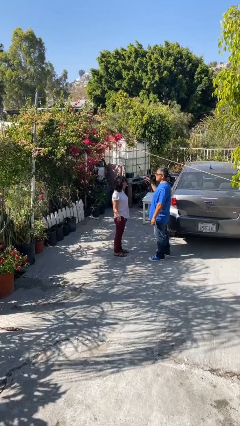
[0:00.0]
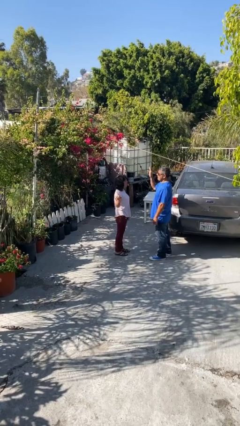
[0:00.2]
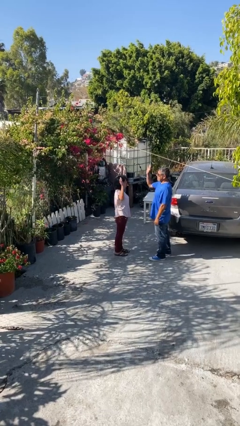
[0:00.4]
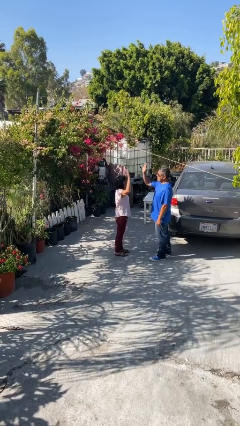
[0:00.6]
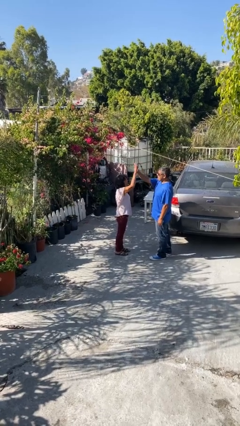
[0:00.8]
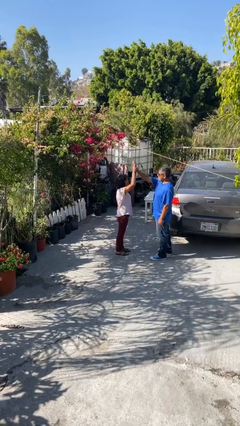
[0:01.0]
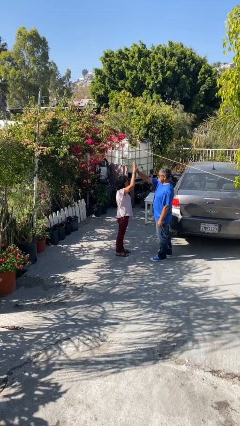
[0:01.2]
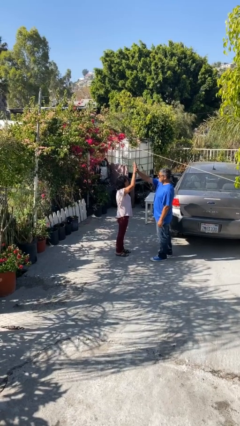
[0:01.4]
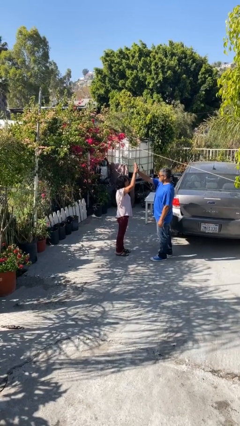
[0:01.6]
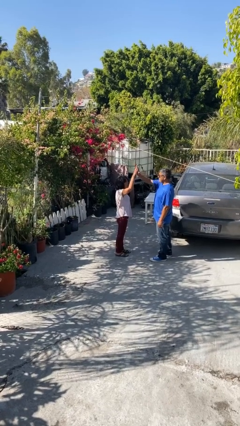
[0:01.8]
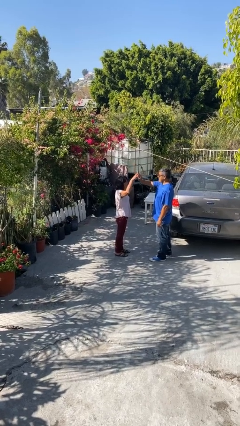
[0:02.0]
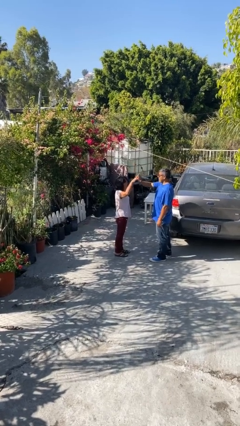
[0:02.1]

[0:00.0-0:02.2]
person highfives hand

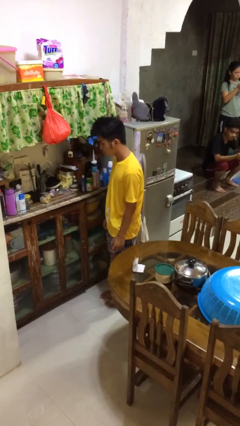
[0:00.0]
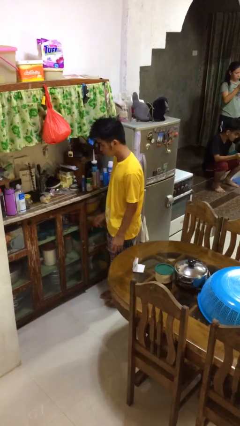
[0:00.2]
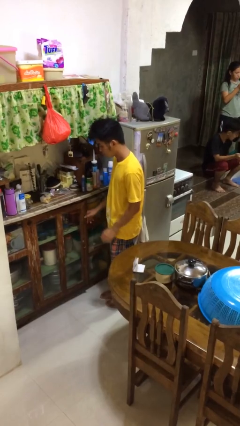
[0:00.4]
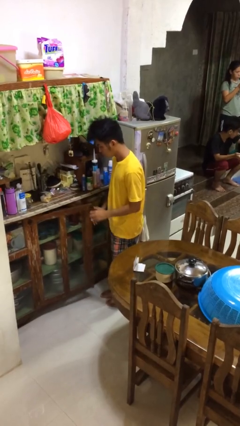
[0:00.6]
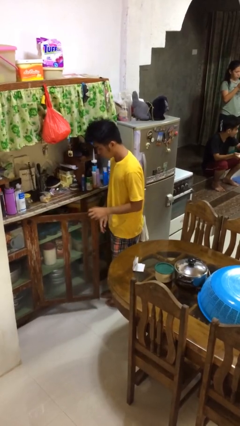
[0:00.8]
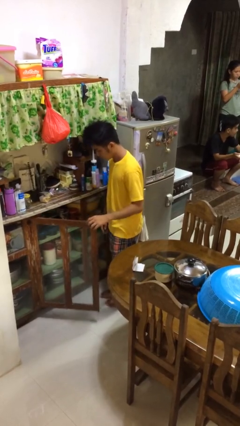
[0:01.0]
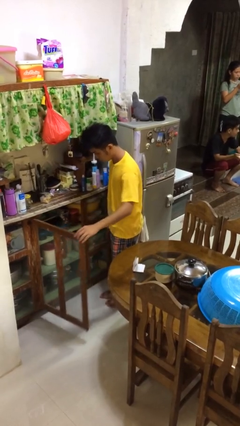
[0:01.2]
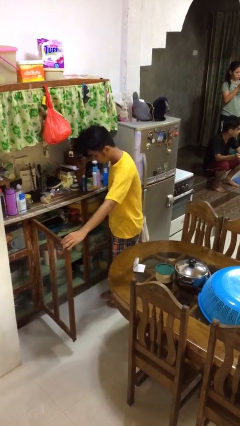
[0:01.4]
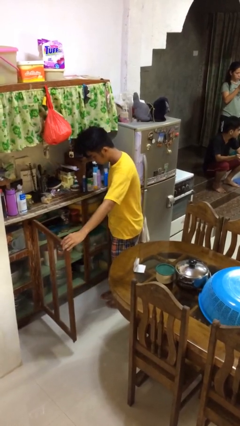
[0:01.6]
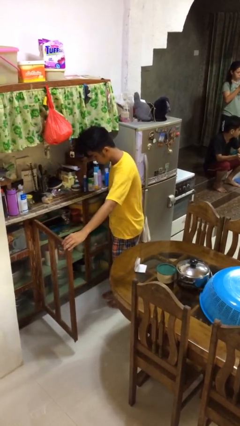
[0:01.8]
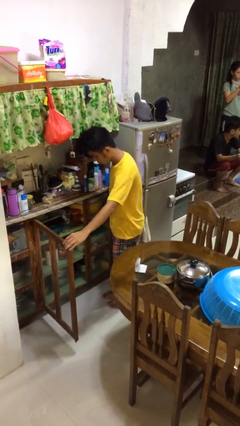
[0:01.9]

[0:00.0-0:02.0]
person opens cabinet

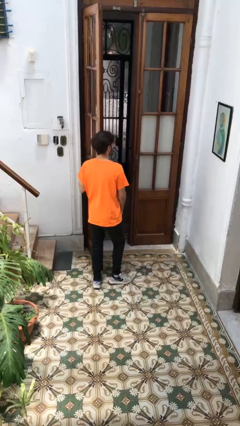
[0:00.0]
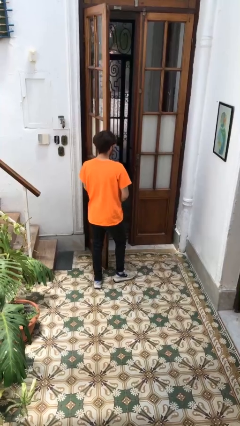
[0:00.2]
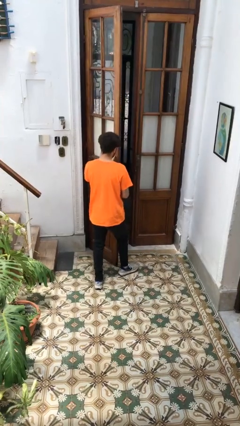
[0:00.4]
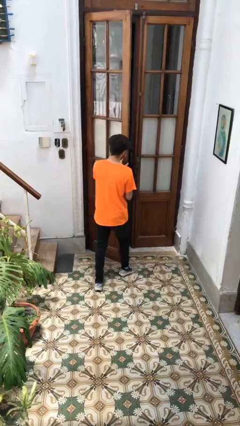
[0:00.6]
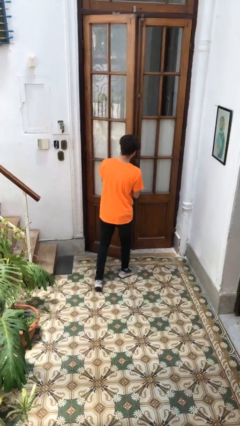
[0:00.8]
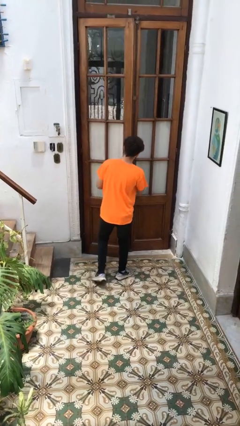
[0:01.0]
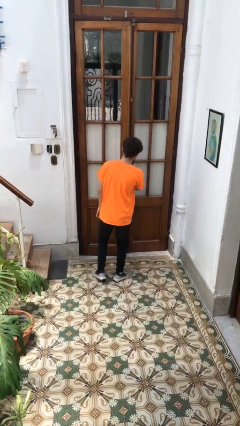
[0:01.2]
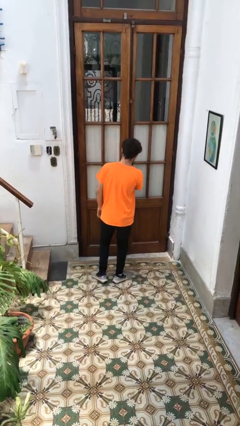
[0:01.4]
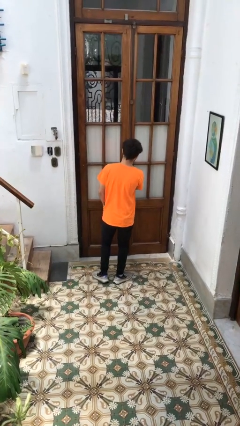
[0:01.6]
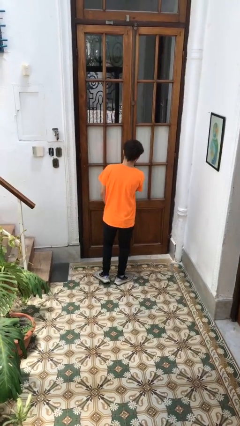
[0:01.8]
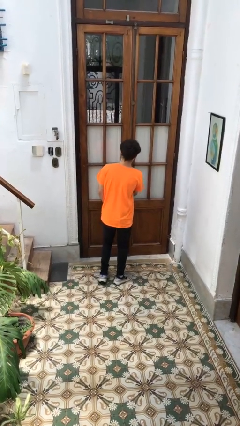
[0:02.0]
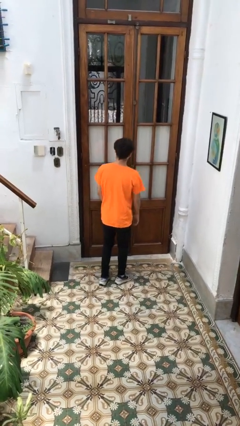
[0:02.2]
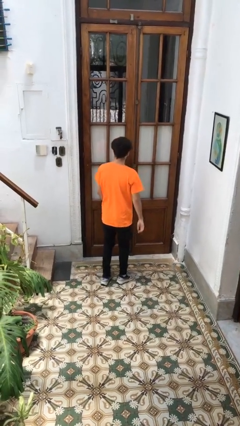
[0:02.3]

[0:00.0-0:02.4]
person closes facility door

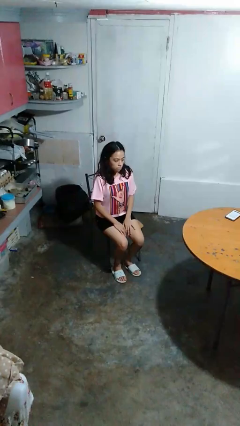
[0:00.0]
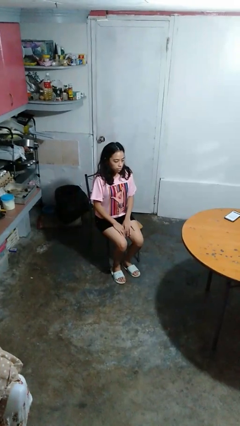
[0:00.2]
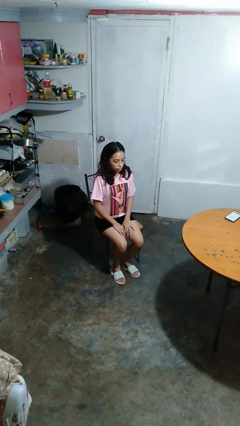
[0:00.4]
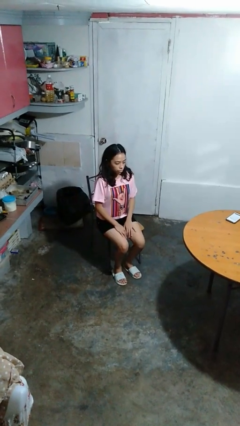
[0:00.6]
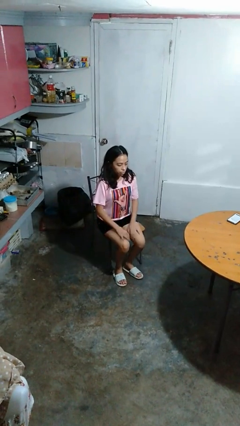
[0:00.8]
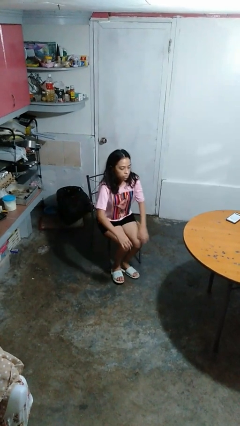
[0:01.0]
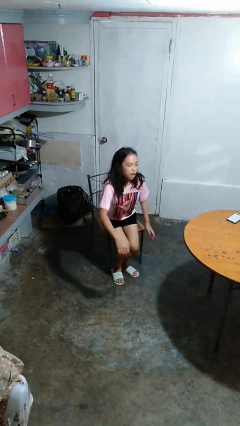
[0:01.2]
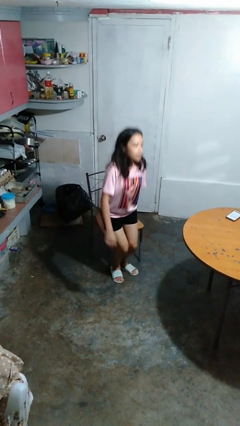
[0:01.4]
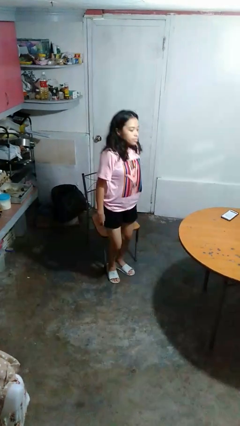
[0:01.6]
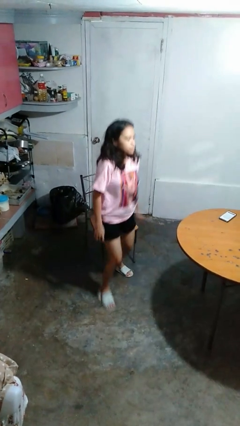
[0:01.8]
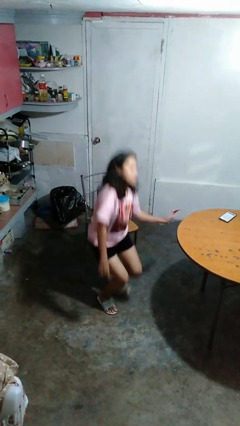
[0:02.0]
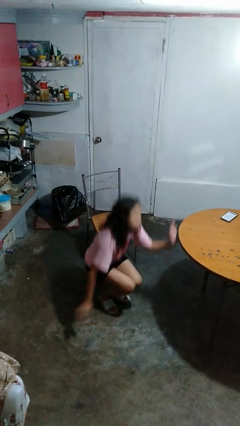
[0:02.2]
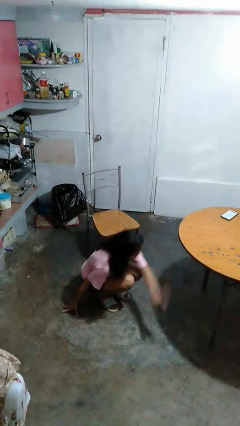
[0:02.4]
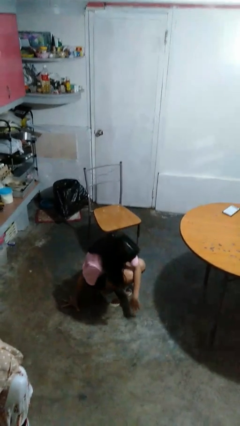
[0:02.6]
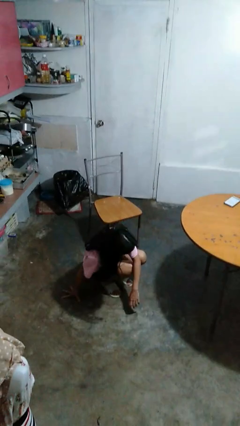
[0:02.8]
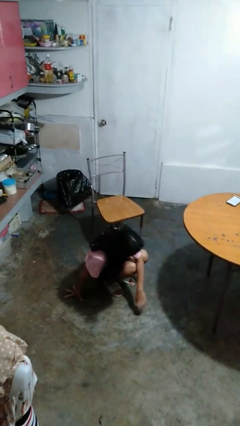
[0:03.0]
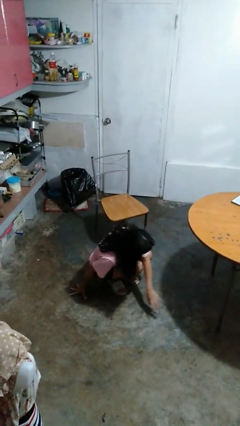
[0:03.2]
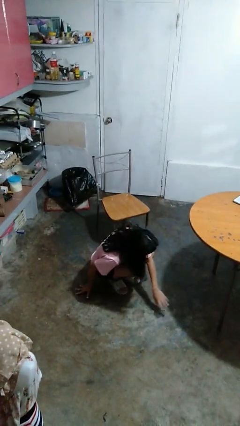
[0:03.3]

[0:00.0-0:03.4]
person falls from chair

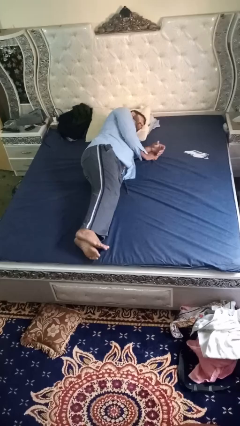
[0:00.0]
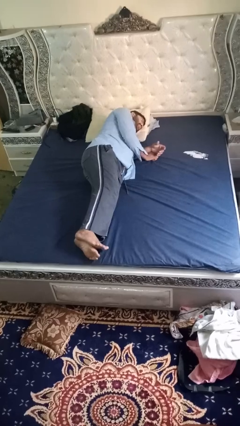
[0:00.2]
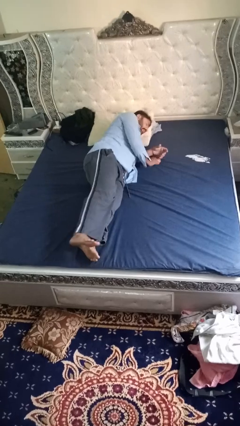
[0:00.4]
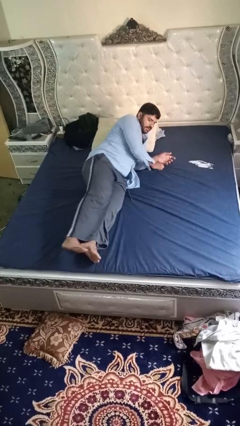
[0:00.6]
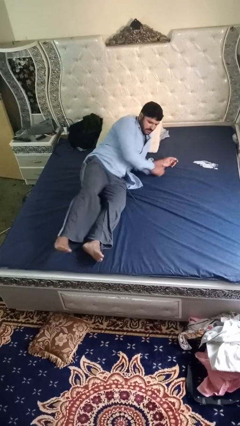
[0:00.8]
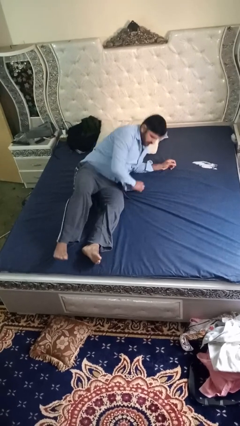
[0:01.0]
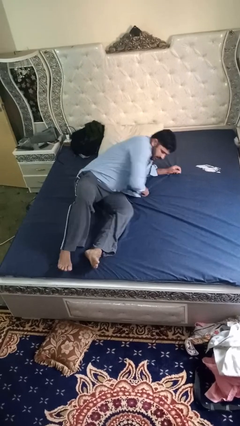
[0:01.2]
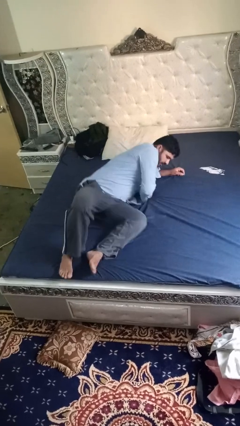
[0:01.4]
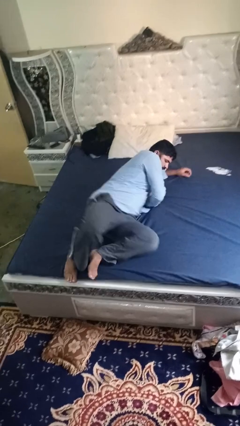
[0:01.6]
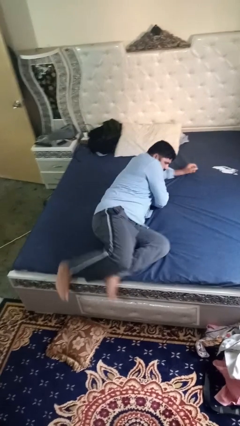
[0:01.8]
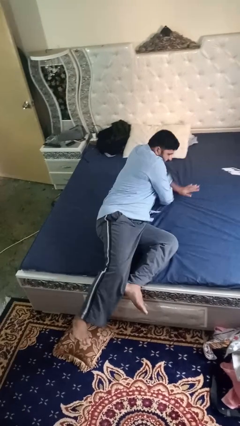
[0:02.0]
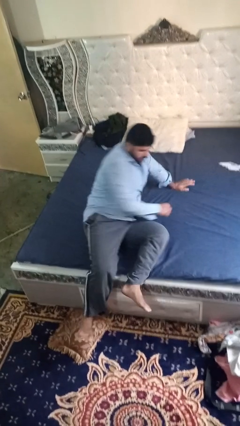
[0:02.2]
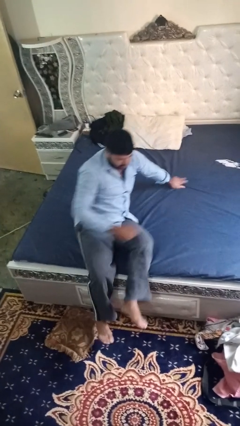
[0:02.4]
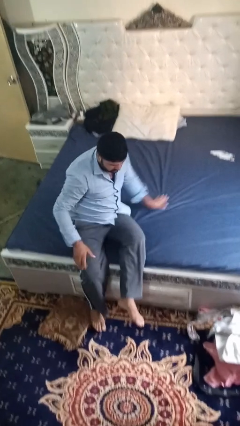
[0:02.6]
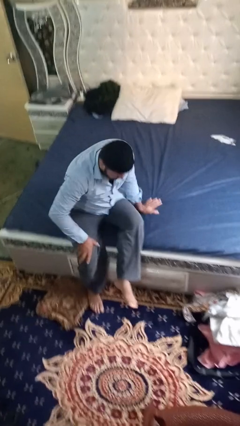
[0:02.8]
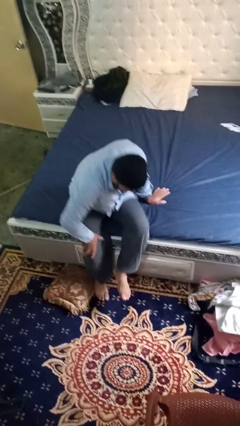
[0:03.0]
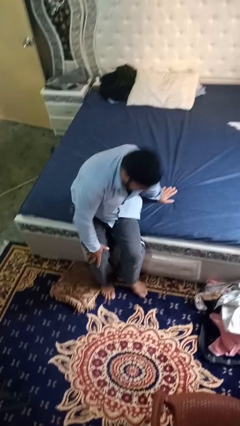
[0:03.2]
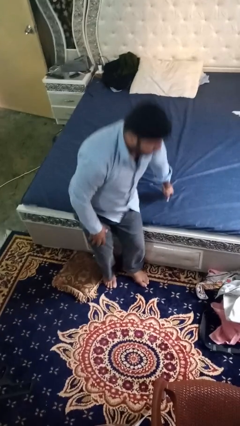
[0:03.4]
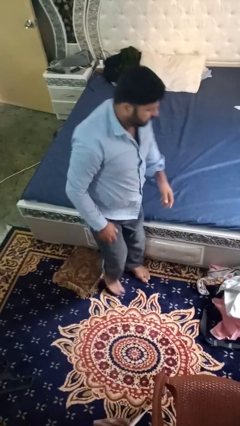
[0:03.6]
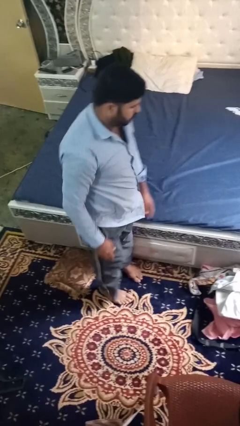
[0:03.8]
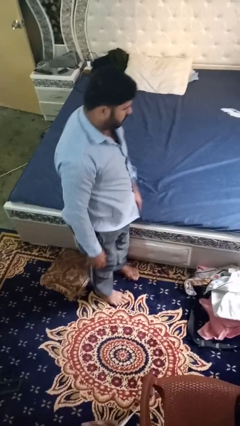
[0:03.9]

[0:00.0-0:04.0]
person stands up

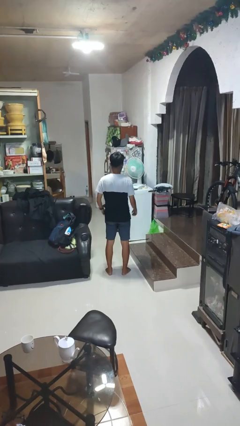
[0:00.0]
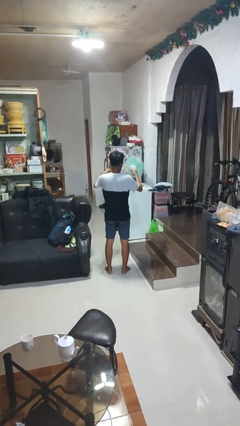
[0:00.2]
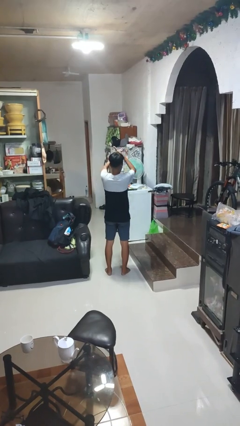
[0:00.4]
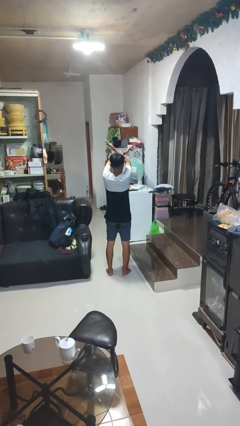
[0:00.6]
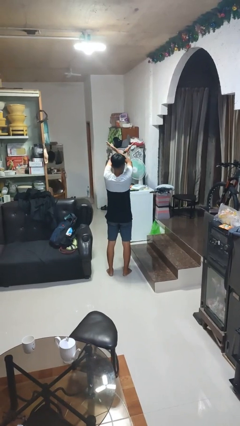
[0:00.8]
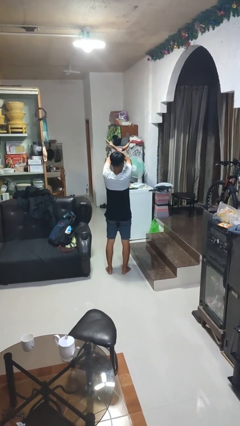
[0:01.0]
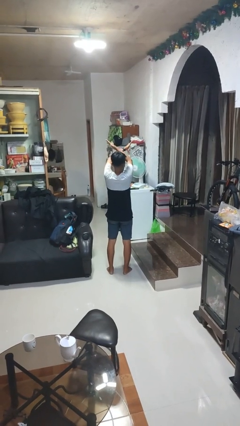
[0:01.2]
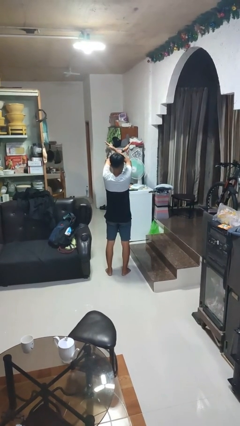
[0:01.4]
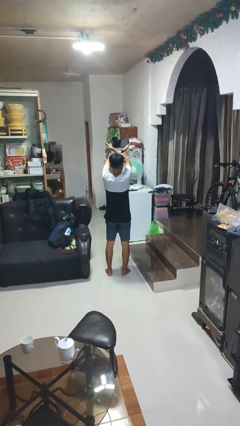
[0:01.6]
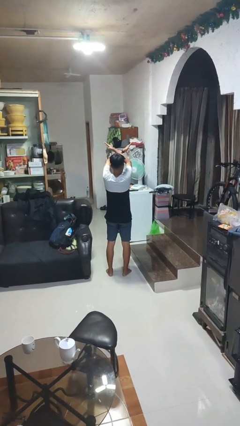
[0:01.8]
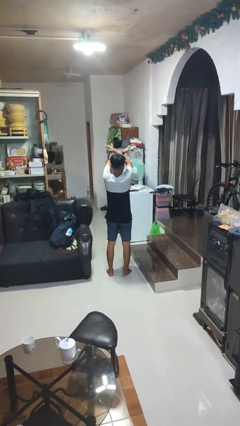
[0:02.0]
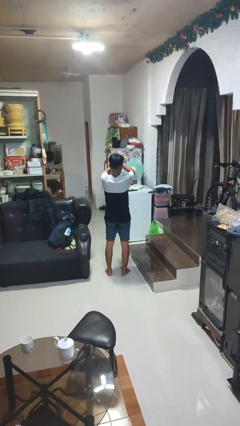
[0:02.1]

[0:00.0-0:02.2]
person gestures arms x

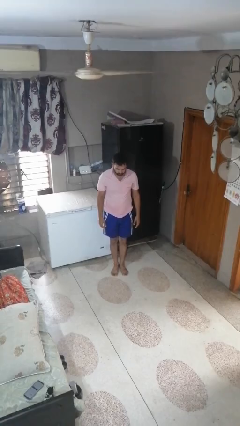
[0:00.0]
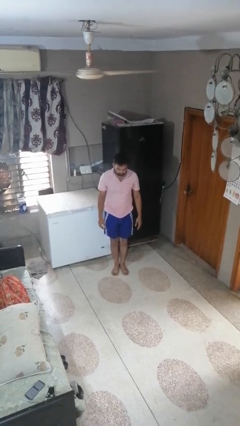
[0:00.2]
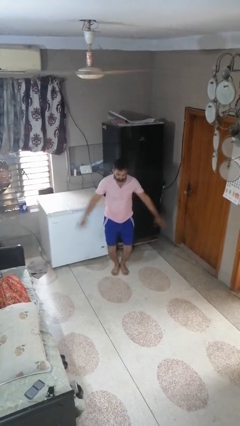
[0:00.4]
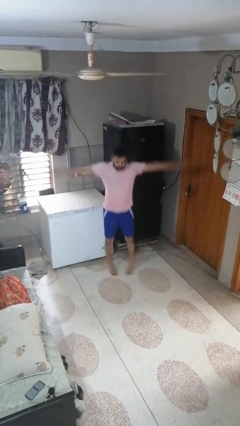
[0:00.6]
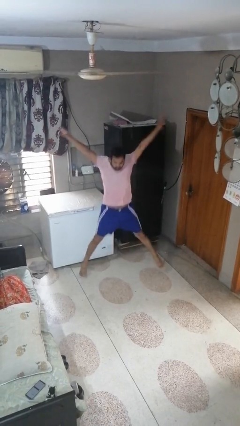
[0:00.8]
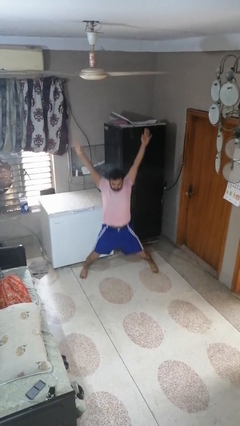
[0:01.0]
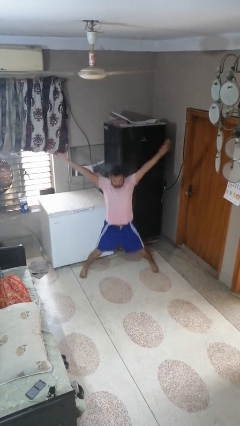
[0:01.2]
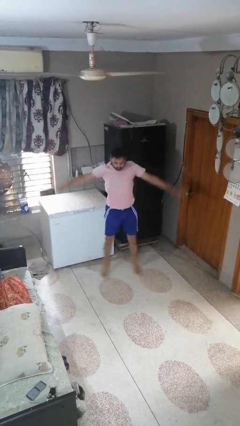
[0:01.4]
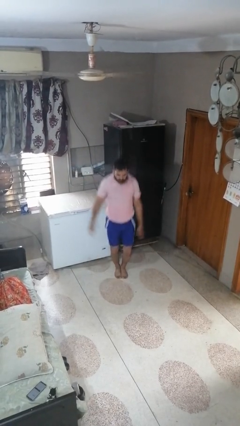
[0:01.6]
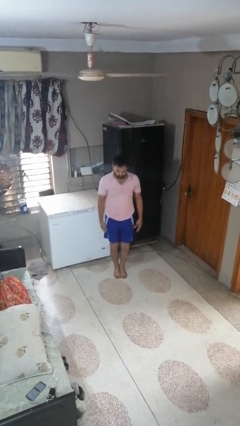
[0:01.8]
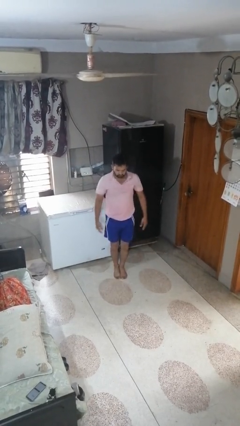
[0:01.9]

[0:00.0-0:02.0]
person exercises with jumping jacks
